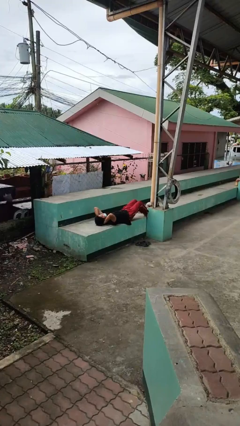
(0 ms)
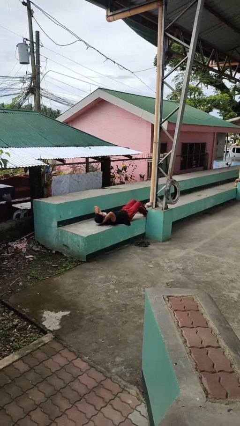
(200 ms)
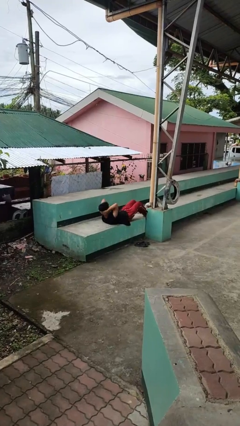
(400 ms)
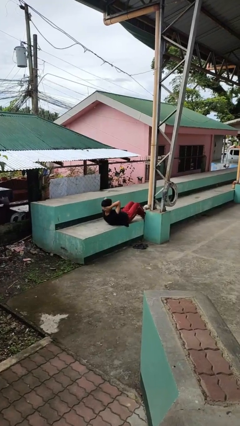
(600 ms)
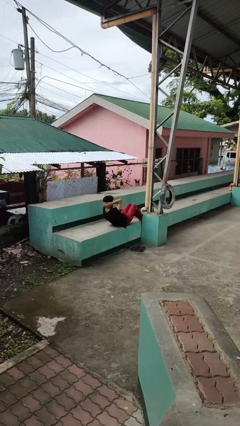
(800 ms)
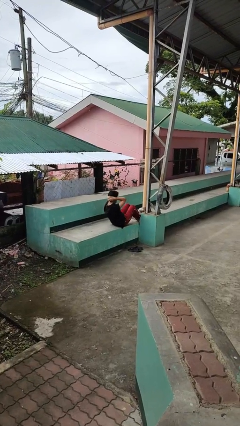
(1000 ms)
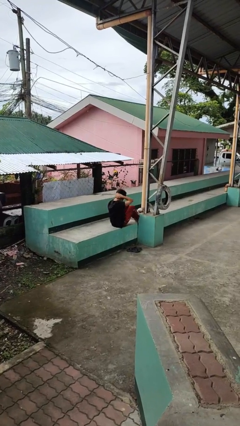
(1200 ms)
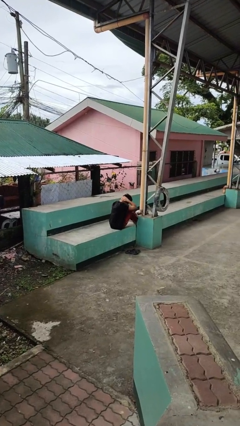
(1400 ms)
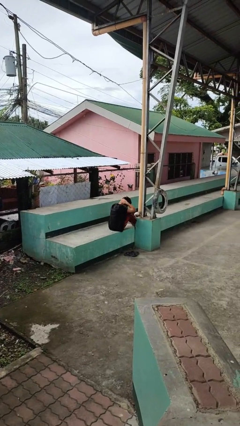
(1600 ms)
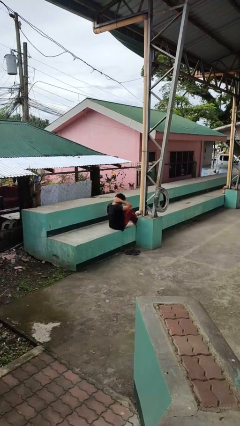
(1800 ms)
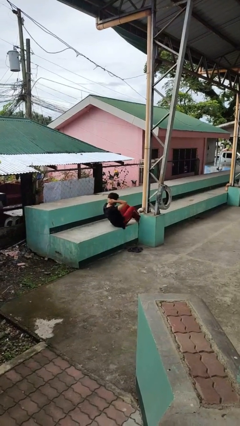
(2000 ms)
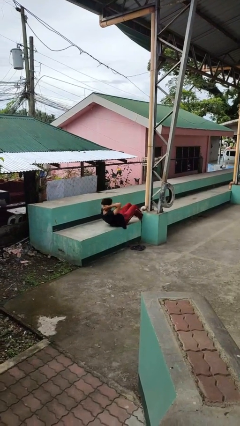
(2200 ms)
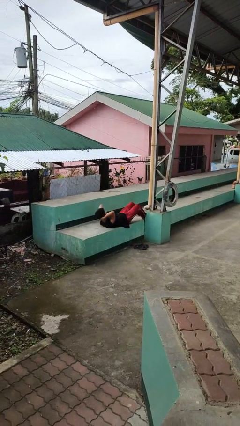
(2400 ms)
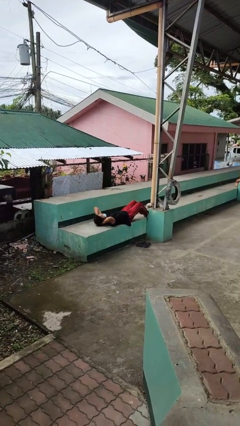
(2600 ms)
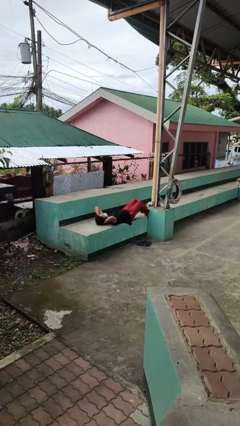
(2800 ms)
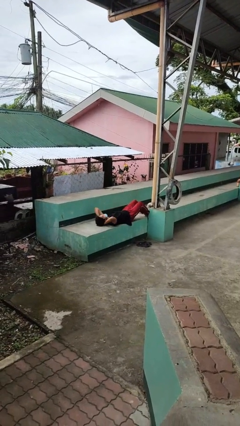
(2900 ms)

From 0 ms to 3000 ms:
person exercises with situp

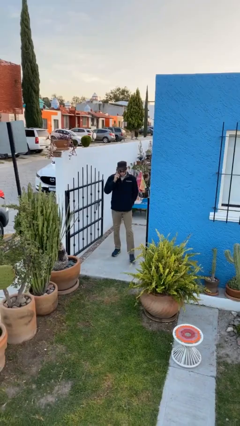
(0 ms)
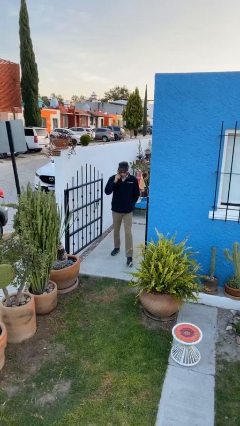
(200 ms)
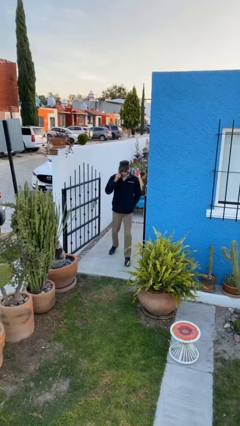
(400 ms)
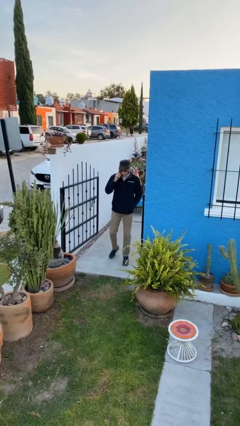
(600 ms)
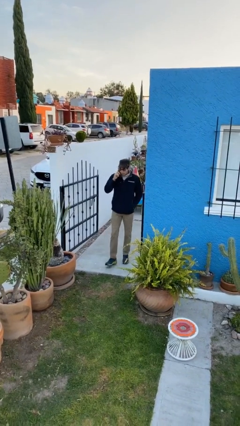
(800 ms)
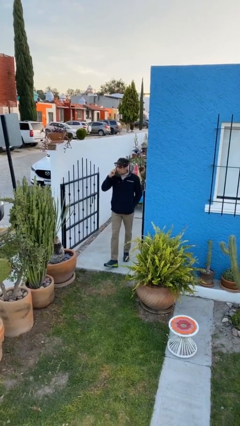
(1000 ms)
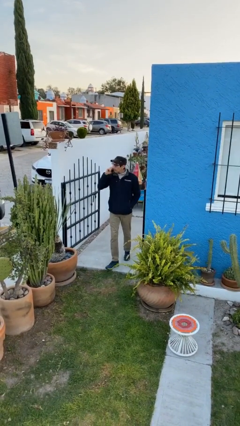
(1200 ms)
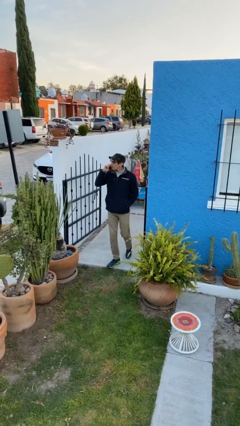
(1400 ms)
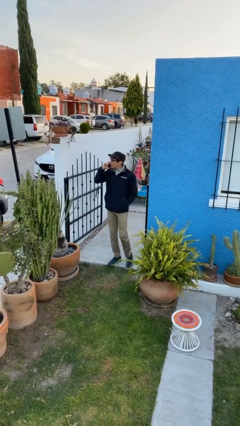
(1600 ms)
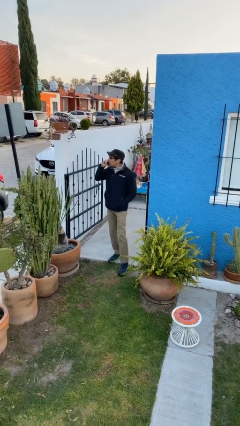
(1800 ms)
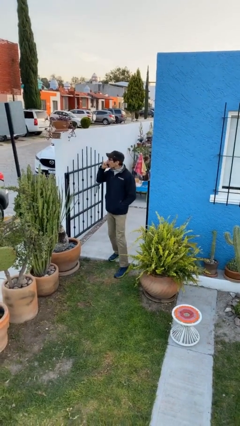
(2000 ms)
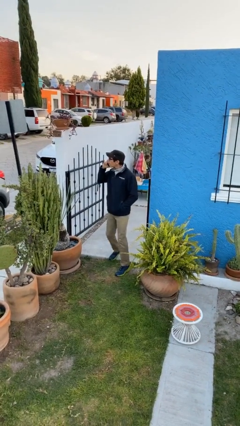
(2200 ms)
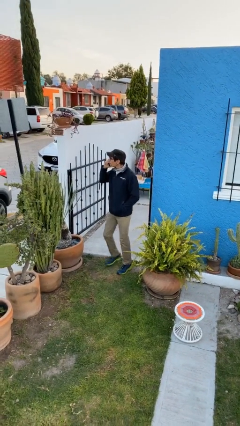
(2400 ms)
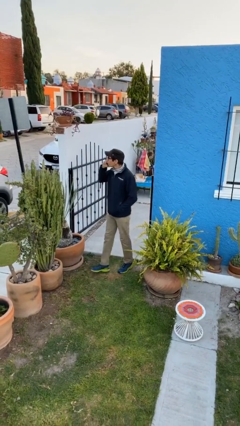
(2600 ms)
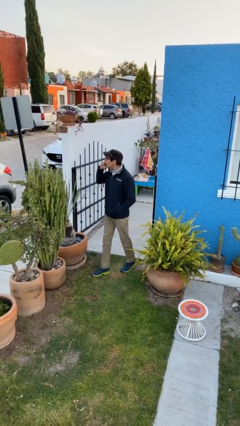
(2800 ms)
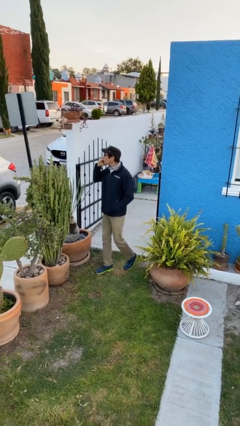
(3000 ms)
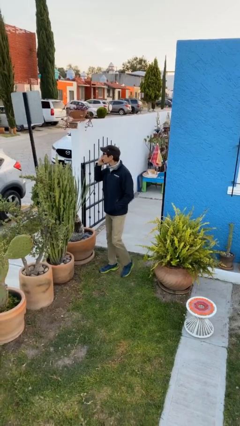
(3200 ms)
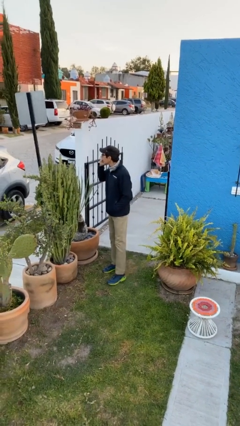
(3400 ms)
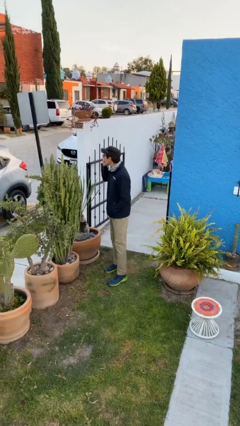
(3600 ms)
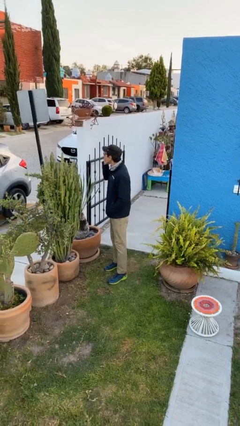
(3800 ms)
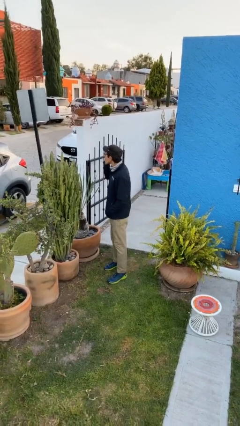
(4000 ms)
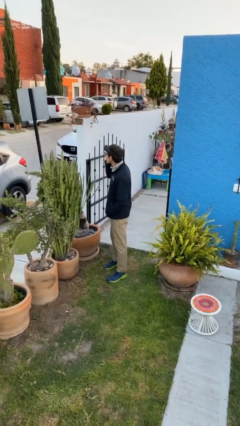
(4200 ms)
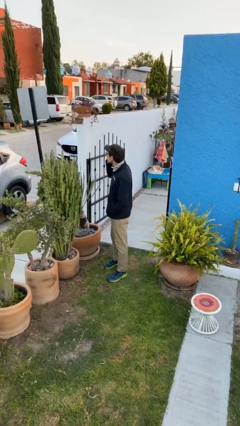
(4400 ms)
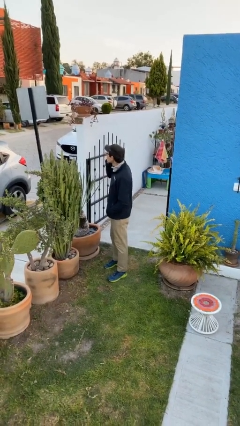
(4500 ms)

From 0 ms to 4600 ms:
person enters scene through structure

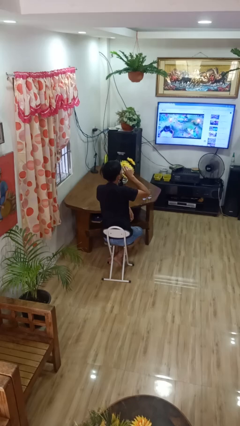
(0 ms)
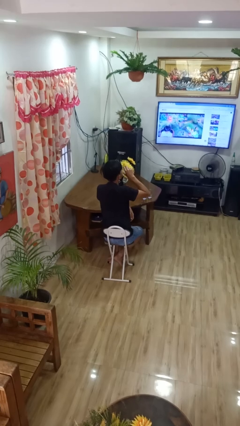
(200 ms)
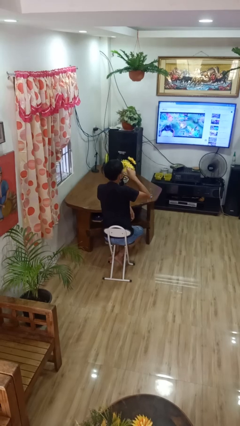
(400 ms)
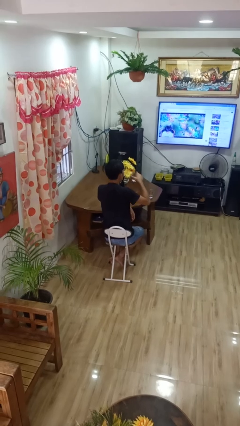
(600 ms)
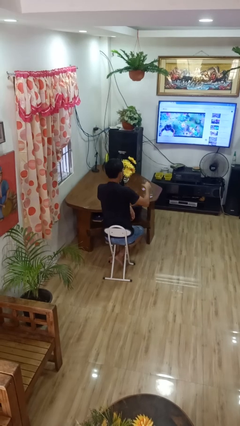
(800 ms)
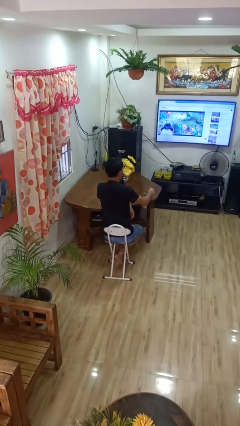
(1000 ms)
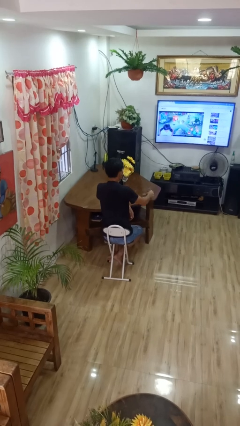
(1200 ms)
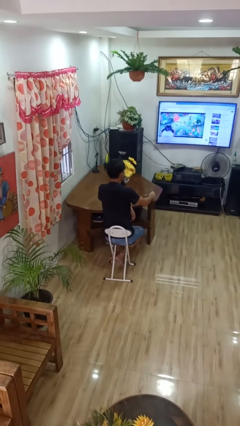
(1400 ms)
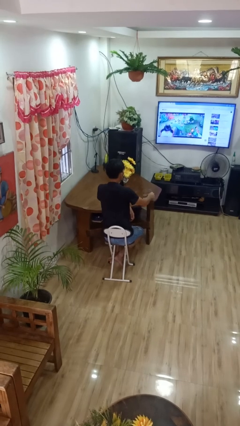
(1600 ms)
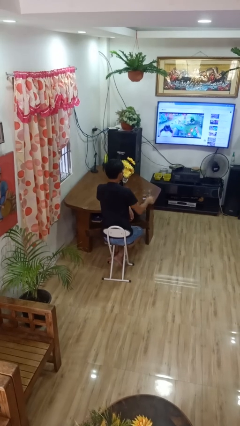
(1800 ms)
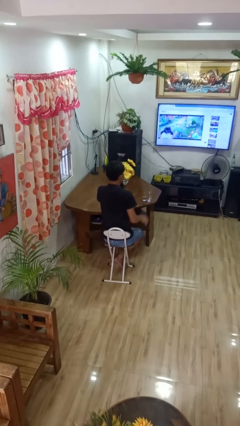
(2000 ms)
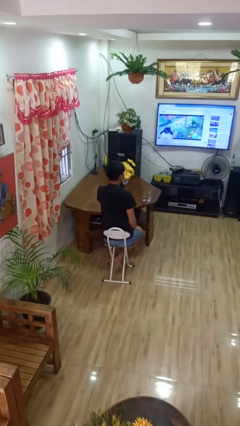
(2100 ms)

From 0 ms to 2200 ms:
person puts down object on table

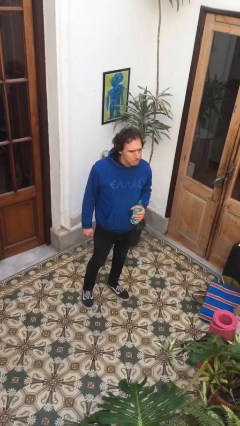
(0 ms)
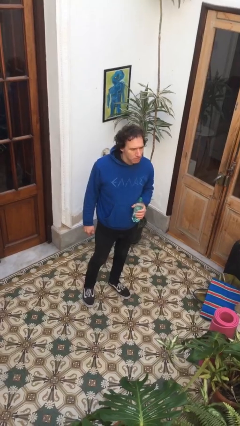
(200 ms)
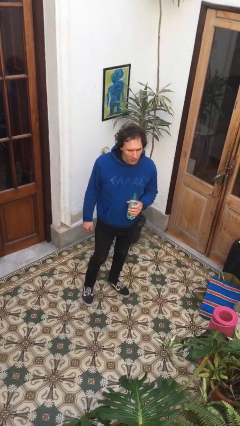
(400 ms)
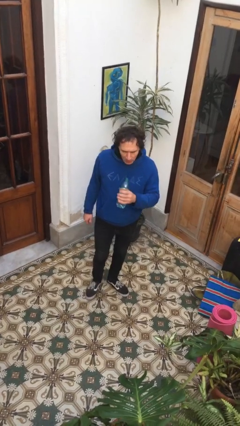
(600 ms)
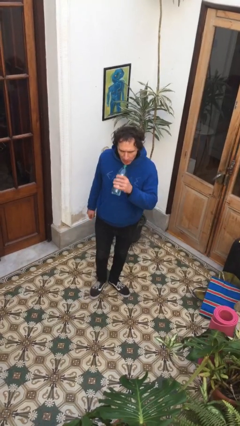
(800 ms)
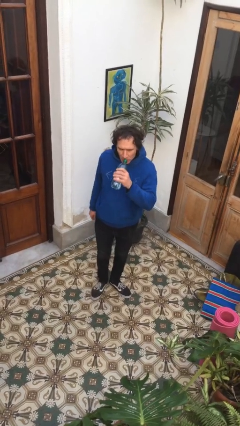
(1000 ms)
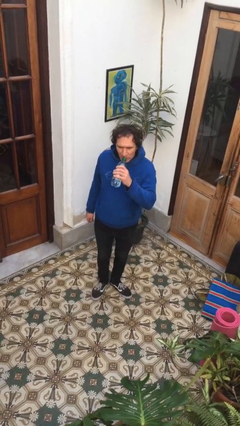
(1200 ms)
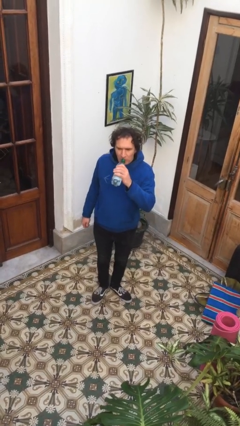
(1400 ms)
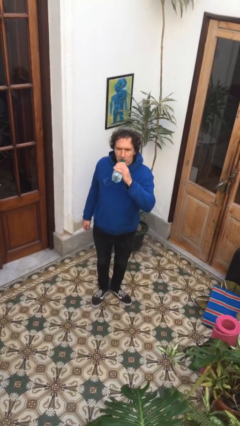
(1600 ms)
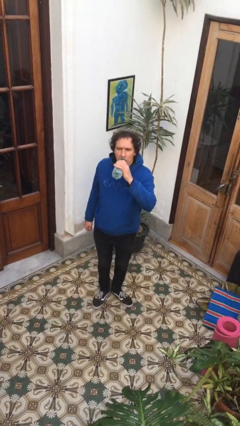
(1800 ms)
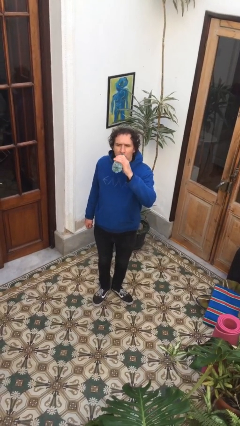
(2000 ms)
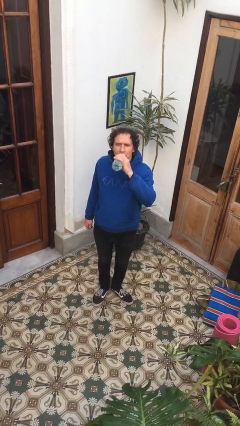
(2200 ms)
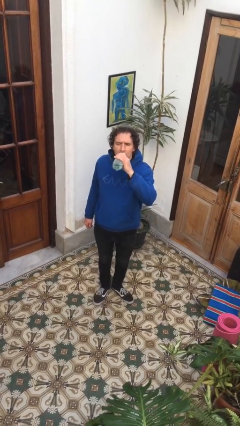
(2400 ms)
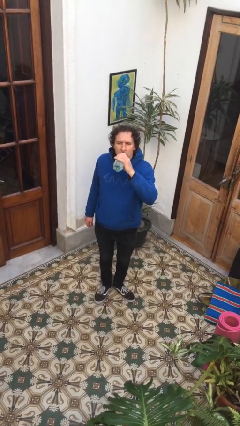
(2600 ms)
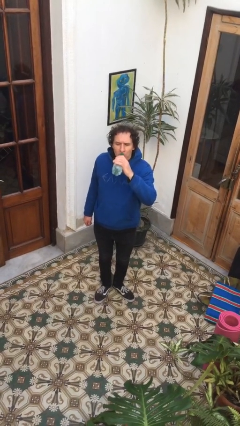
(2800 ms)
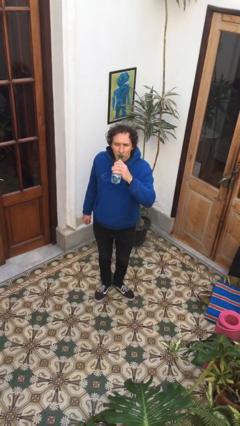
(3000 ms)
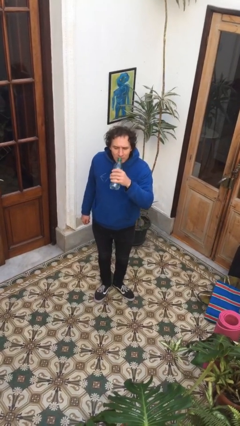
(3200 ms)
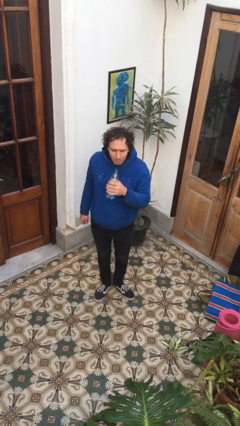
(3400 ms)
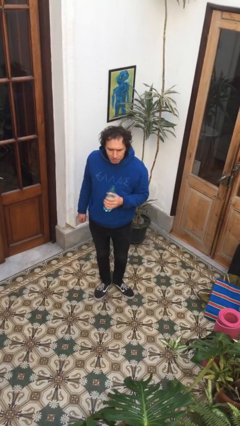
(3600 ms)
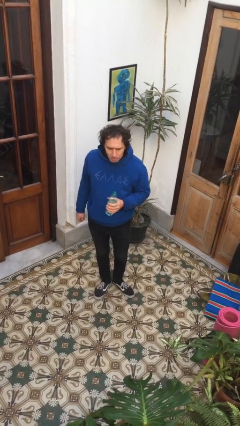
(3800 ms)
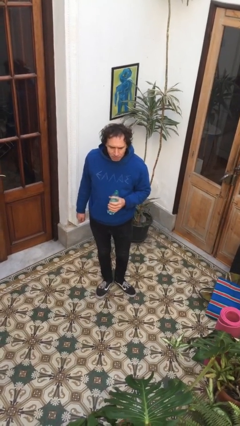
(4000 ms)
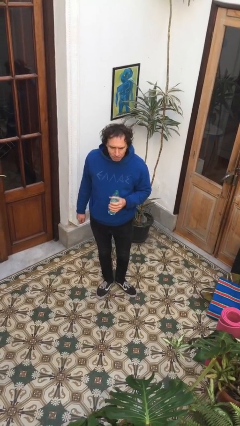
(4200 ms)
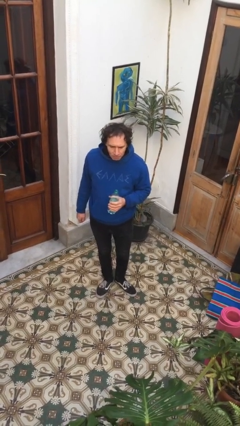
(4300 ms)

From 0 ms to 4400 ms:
person drinks from bottle

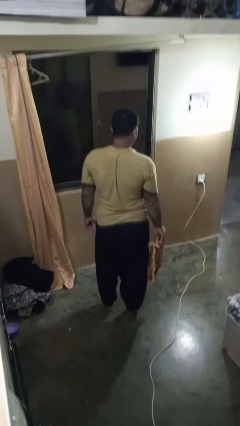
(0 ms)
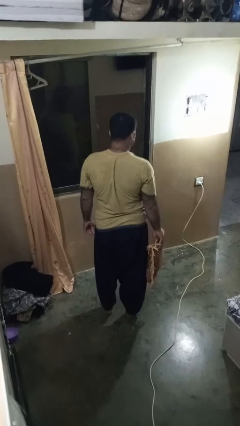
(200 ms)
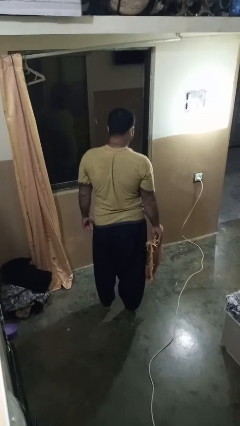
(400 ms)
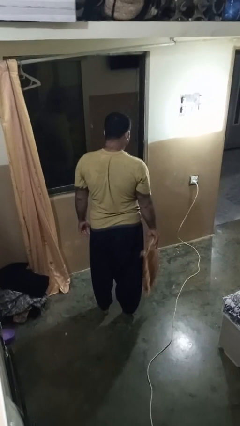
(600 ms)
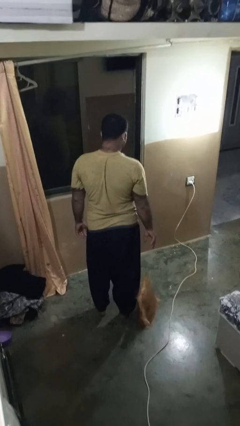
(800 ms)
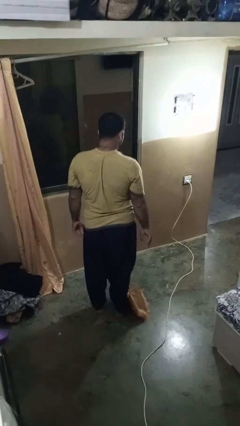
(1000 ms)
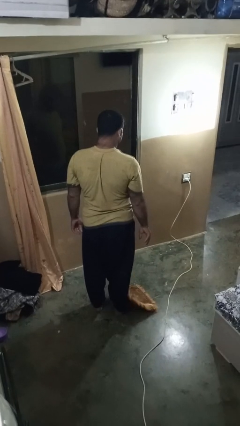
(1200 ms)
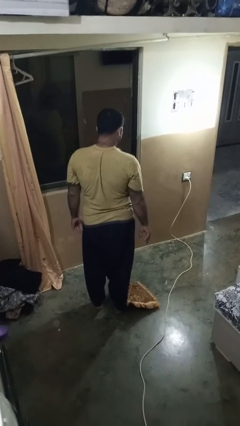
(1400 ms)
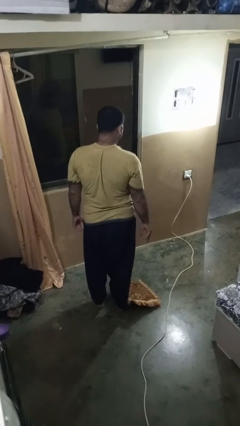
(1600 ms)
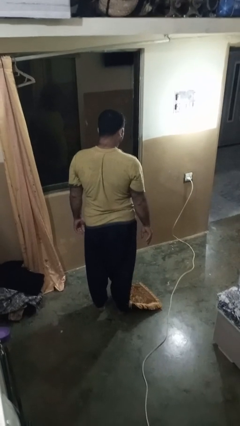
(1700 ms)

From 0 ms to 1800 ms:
person drops object

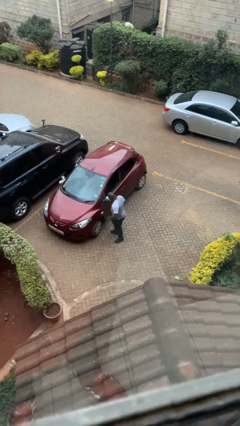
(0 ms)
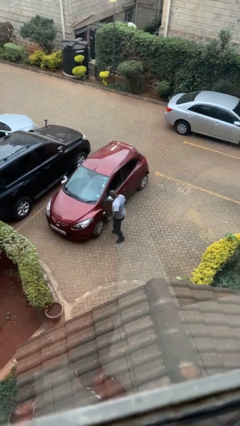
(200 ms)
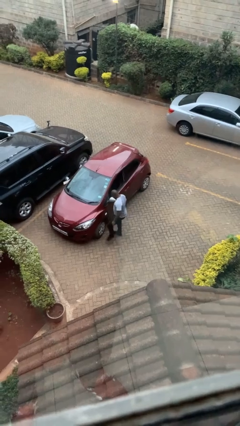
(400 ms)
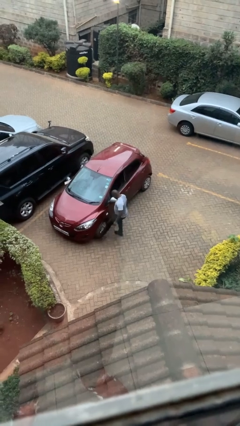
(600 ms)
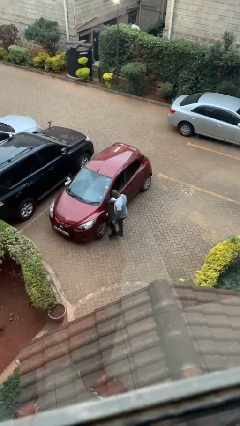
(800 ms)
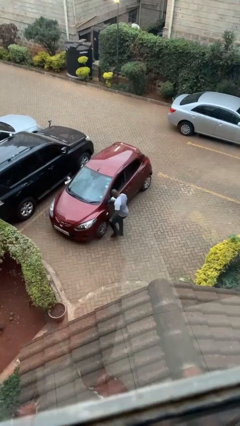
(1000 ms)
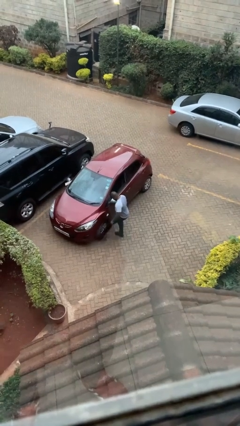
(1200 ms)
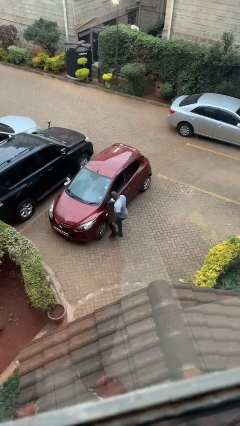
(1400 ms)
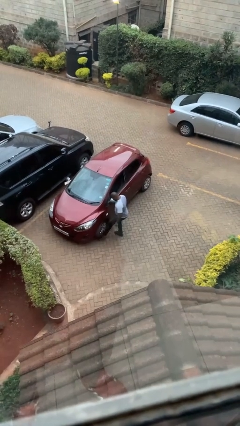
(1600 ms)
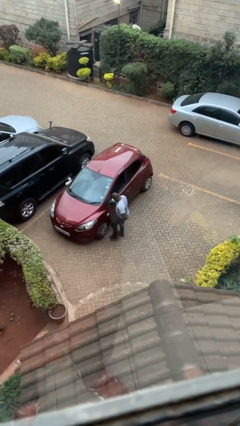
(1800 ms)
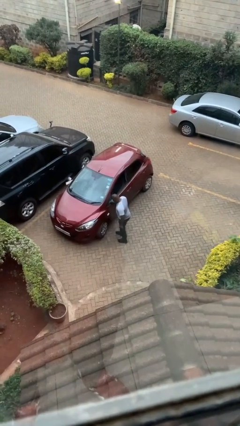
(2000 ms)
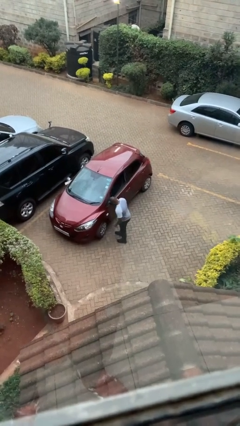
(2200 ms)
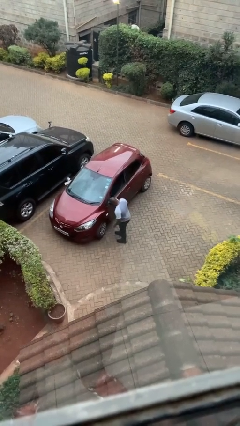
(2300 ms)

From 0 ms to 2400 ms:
person kicks car tires
